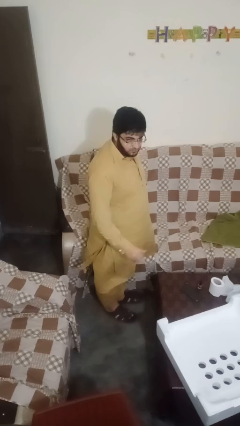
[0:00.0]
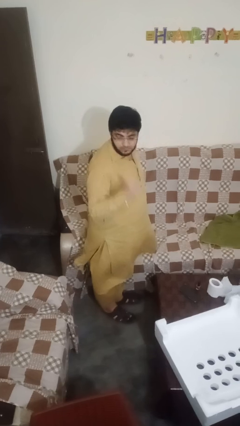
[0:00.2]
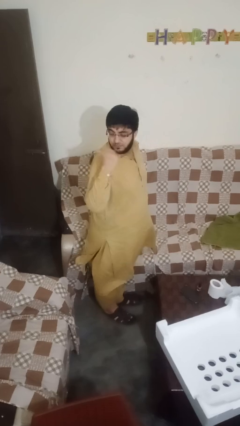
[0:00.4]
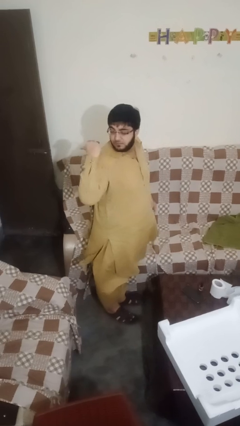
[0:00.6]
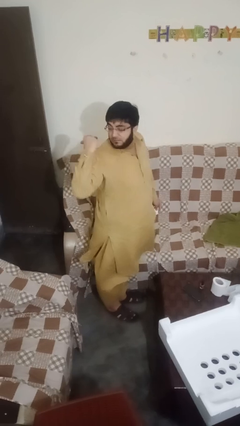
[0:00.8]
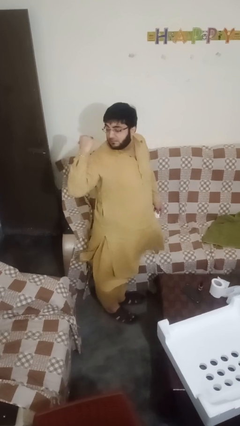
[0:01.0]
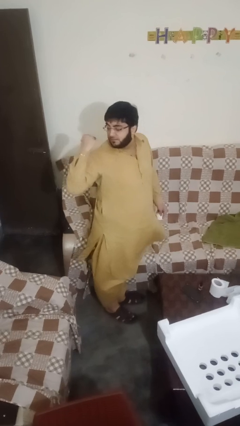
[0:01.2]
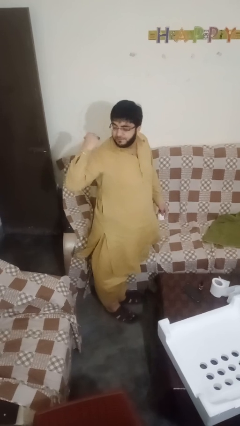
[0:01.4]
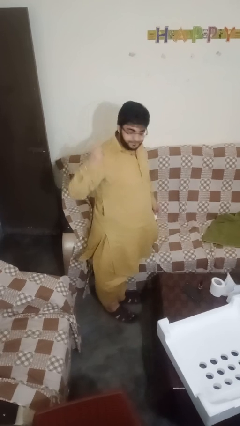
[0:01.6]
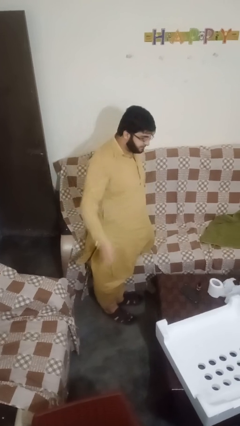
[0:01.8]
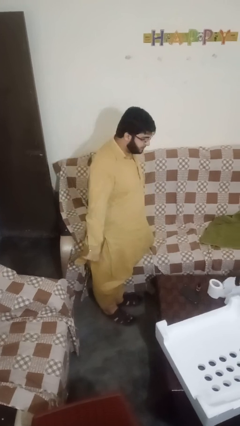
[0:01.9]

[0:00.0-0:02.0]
person gestures behind me

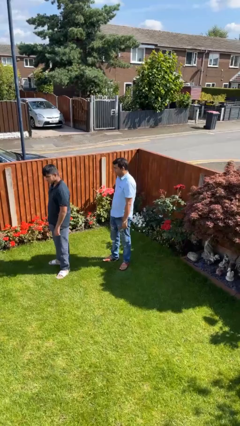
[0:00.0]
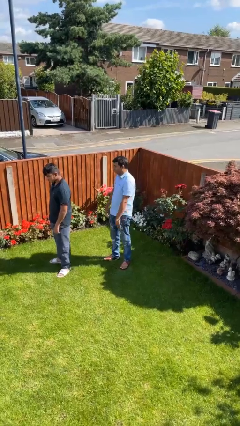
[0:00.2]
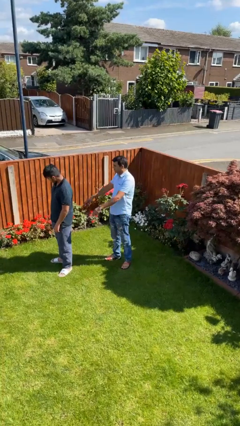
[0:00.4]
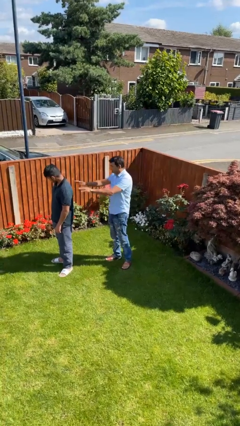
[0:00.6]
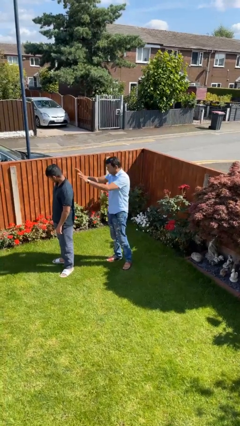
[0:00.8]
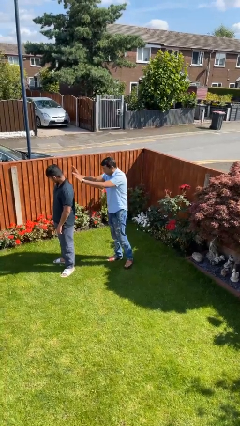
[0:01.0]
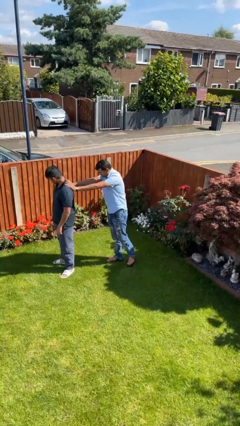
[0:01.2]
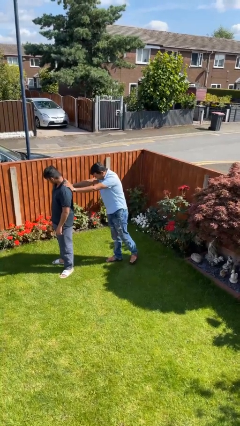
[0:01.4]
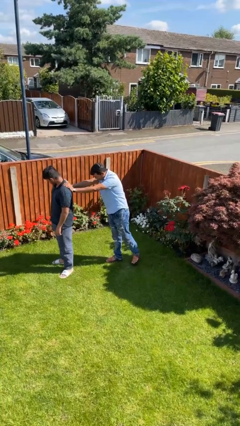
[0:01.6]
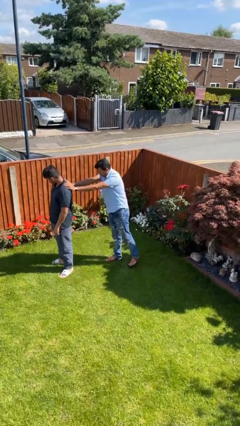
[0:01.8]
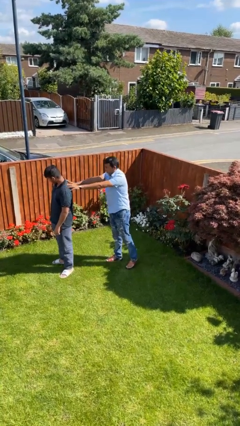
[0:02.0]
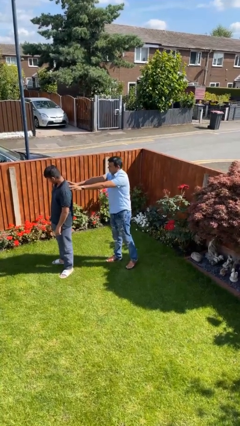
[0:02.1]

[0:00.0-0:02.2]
person touches back of person

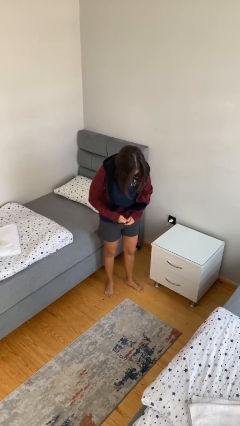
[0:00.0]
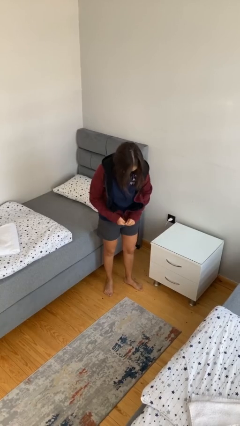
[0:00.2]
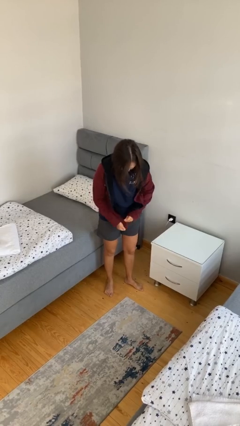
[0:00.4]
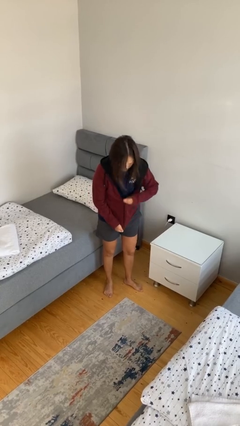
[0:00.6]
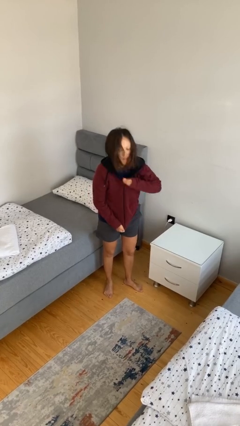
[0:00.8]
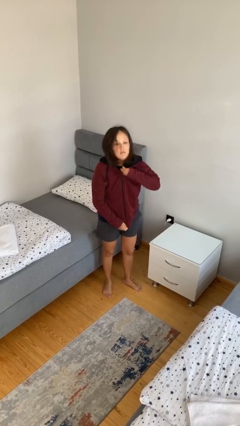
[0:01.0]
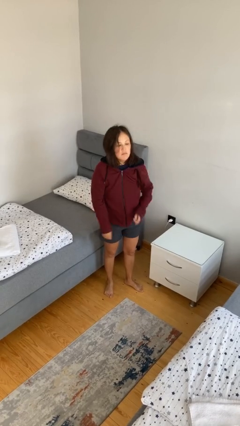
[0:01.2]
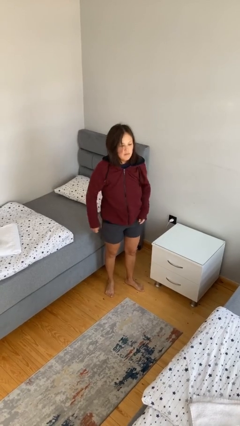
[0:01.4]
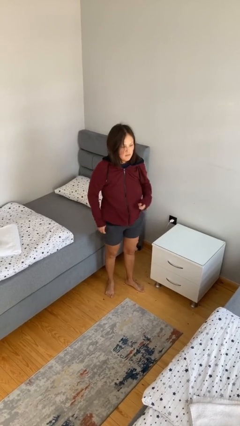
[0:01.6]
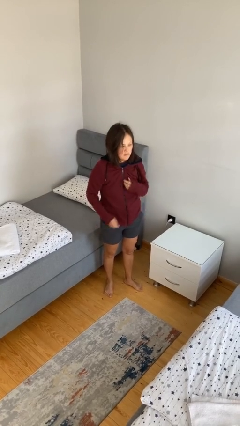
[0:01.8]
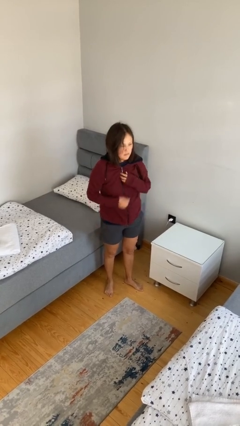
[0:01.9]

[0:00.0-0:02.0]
person zips up jacket

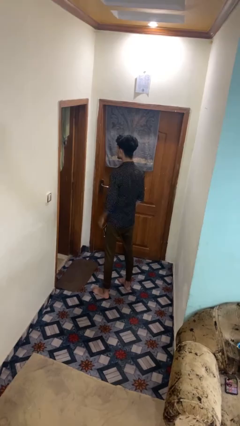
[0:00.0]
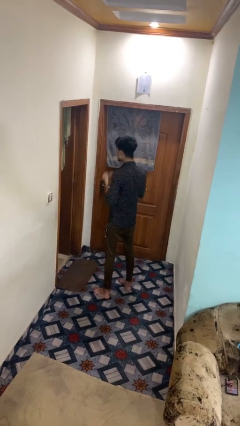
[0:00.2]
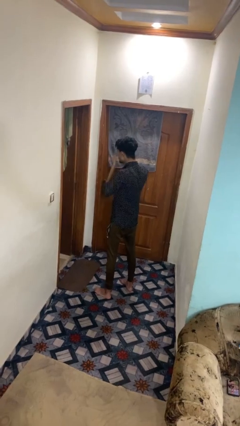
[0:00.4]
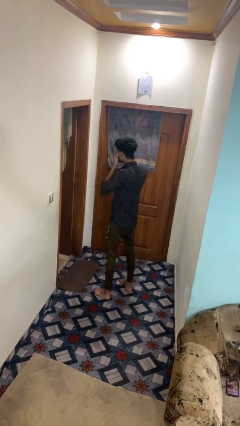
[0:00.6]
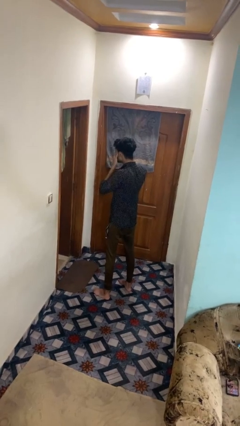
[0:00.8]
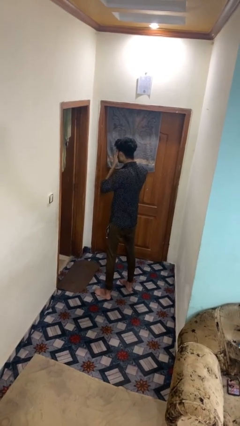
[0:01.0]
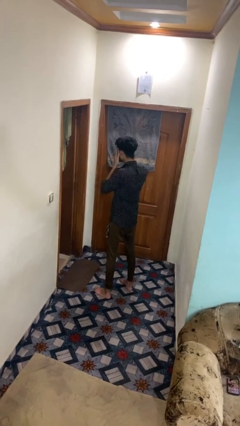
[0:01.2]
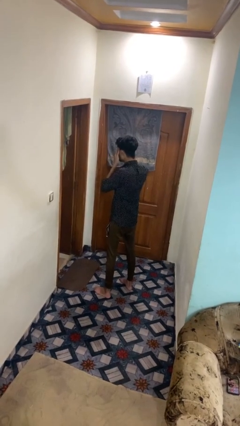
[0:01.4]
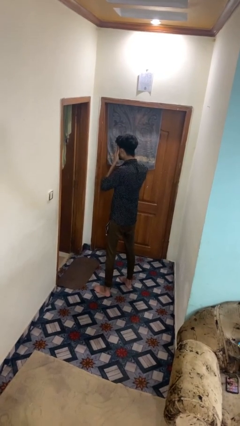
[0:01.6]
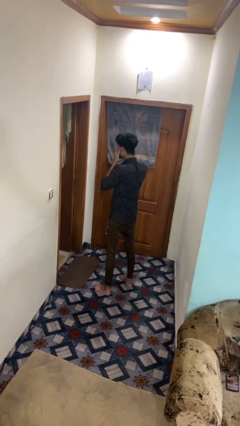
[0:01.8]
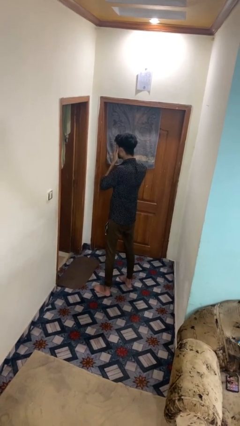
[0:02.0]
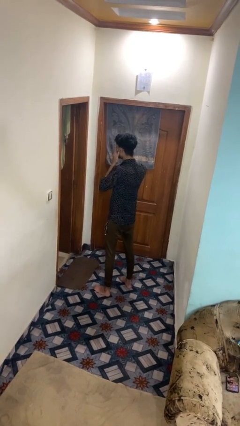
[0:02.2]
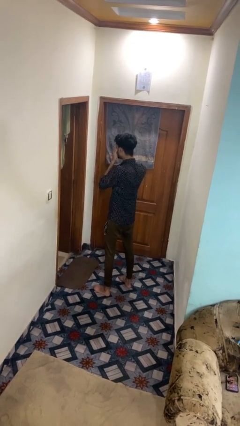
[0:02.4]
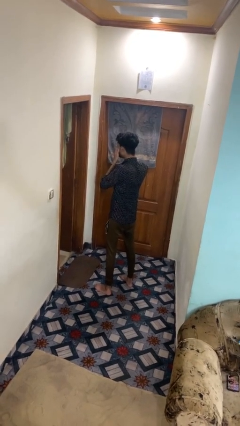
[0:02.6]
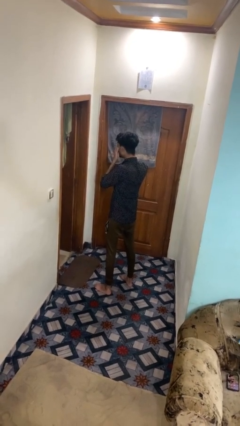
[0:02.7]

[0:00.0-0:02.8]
person rubs eyes

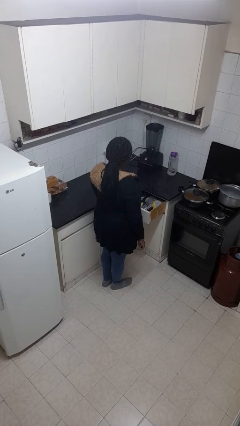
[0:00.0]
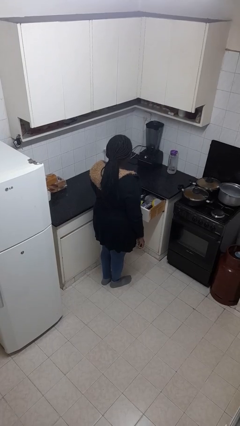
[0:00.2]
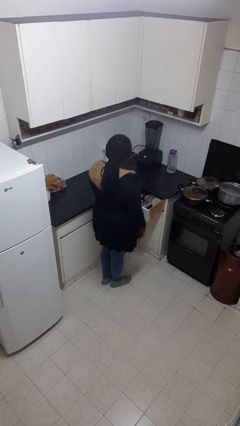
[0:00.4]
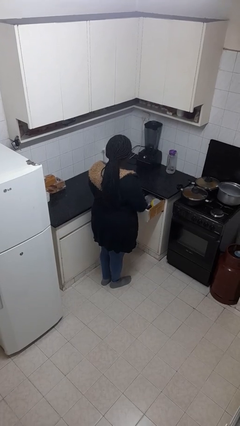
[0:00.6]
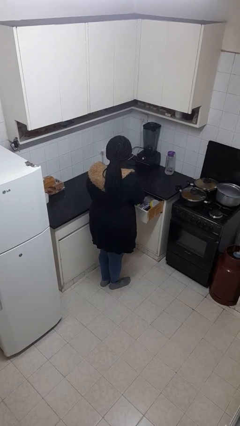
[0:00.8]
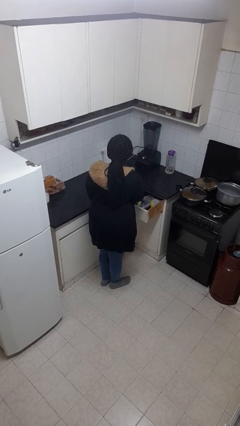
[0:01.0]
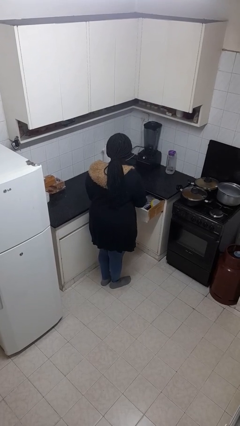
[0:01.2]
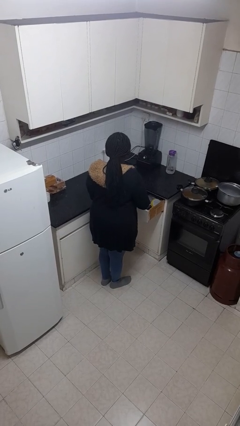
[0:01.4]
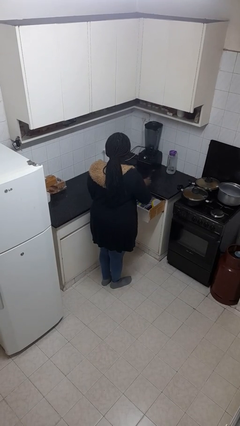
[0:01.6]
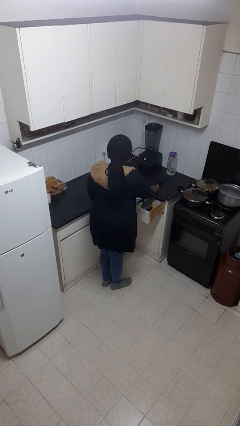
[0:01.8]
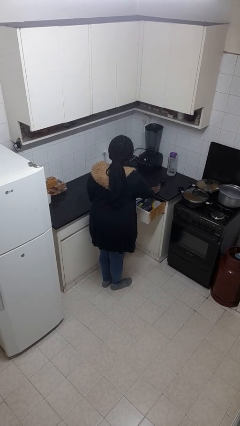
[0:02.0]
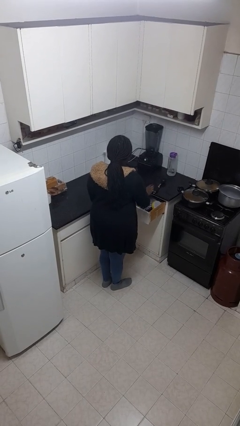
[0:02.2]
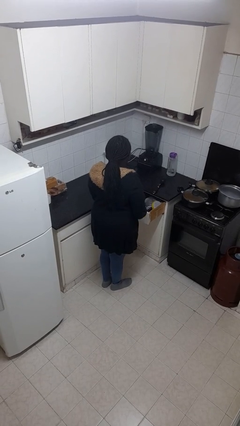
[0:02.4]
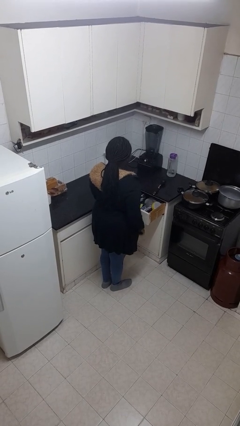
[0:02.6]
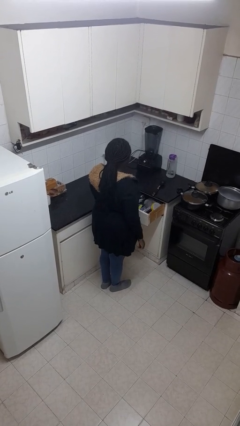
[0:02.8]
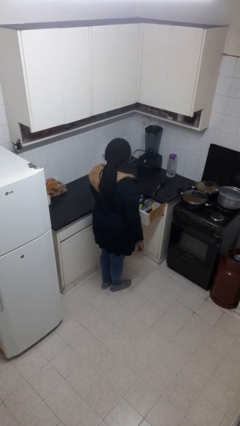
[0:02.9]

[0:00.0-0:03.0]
person takes object from kitchen drawer

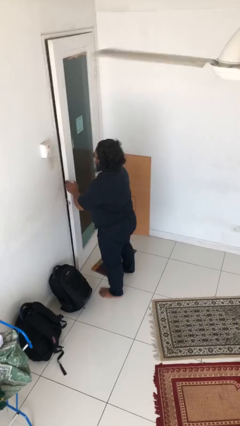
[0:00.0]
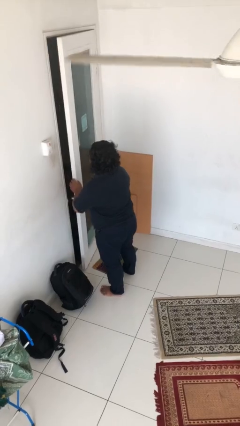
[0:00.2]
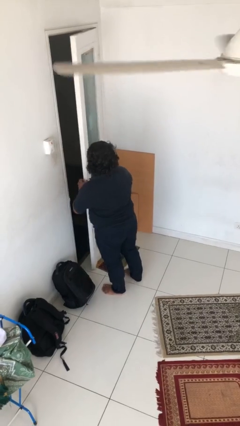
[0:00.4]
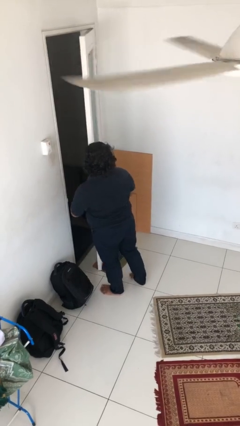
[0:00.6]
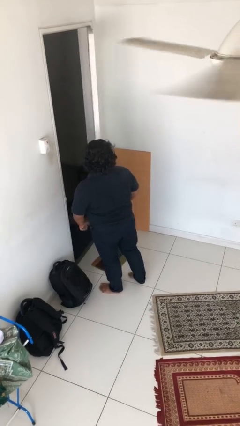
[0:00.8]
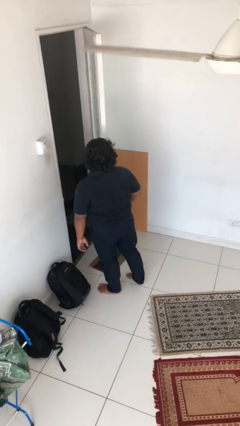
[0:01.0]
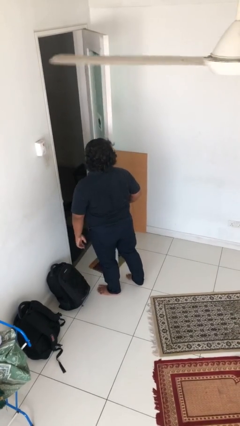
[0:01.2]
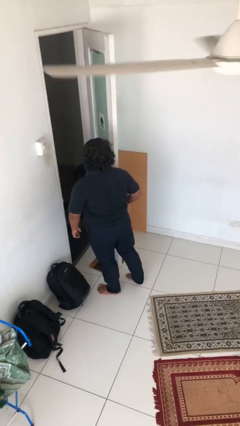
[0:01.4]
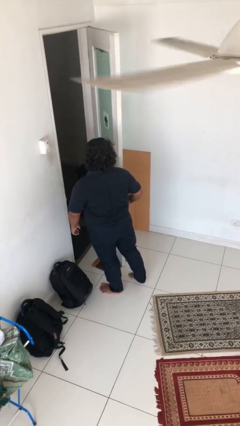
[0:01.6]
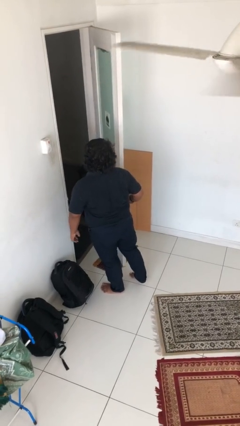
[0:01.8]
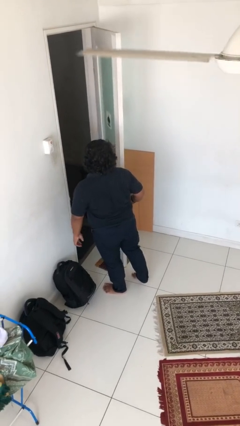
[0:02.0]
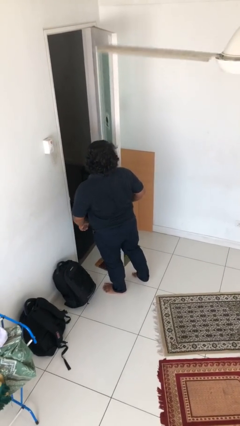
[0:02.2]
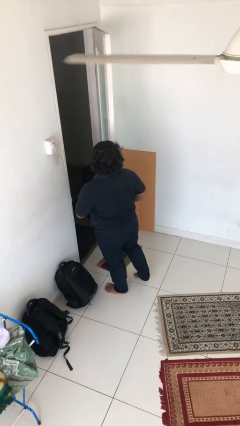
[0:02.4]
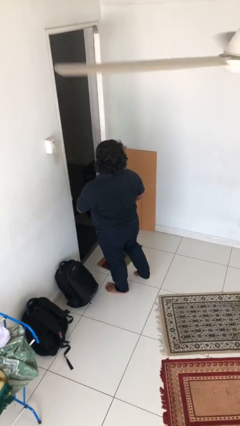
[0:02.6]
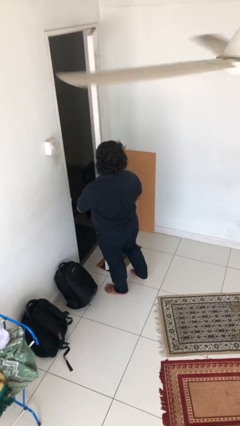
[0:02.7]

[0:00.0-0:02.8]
person opens facility door

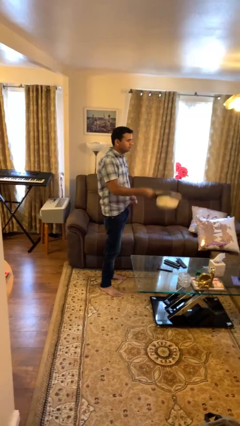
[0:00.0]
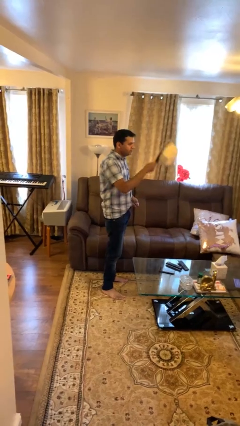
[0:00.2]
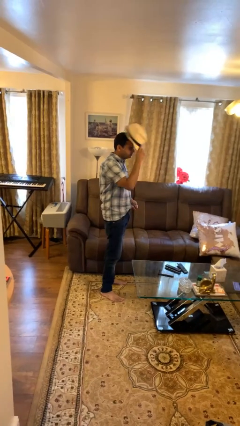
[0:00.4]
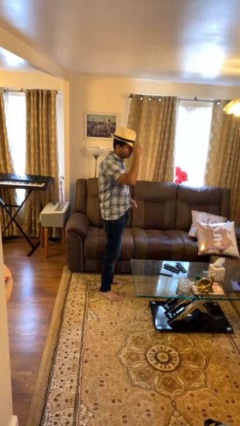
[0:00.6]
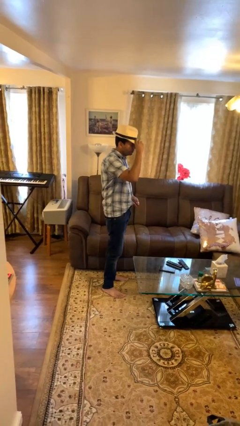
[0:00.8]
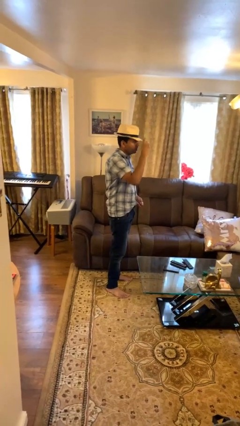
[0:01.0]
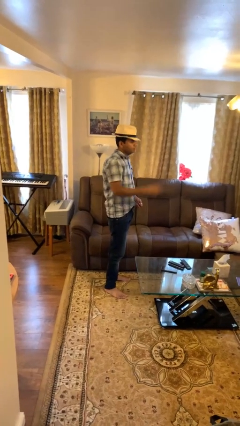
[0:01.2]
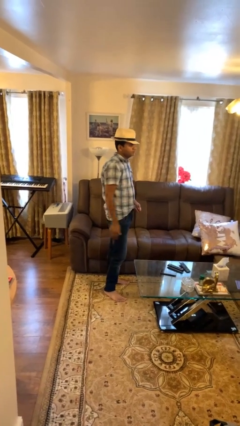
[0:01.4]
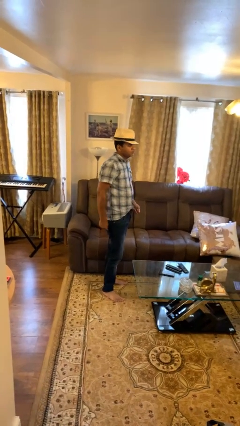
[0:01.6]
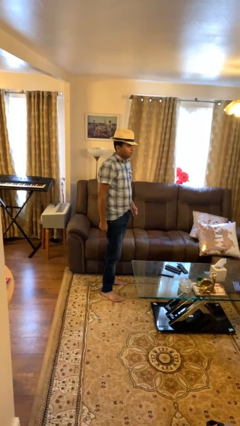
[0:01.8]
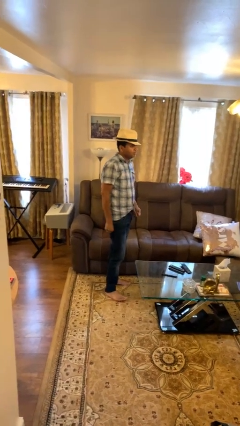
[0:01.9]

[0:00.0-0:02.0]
person puts on hat

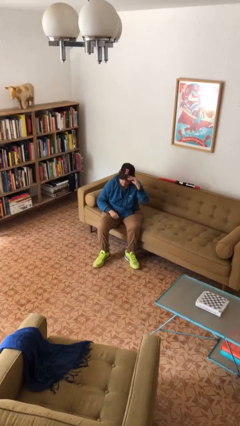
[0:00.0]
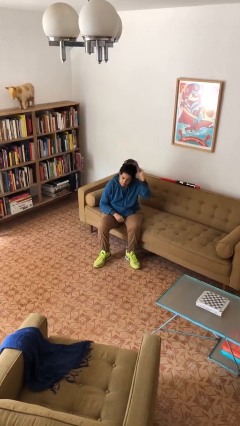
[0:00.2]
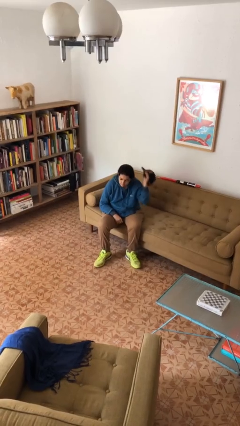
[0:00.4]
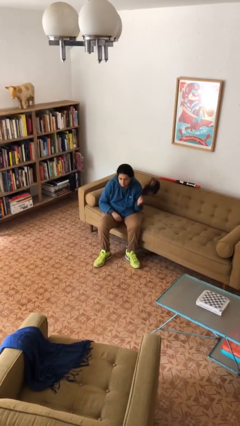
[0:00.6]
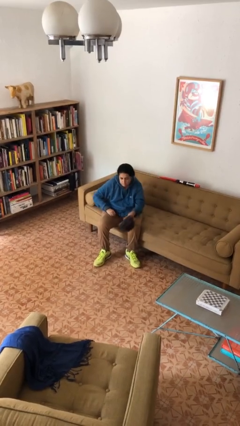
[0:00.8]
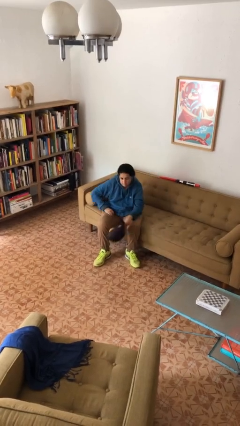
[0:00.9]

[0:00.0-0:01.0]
person takes off hat
